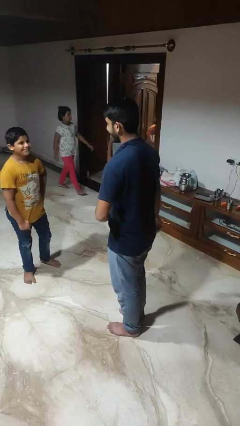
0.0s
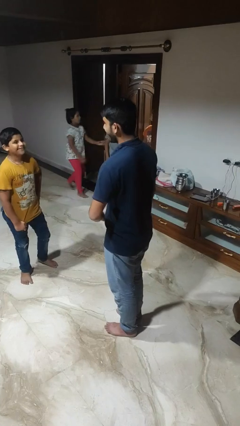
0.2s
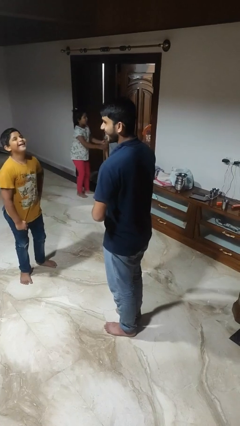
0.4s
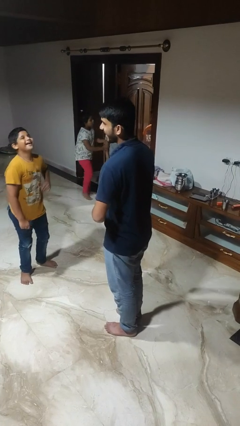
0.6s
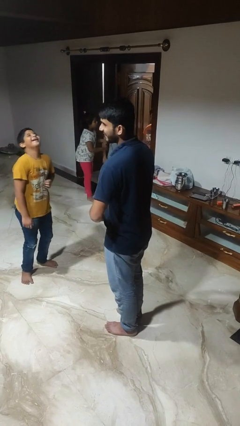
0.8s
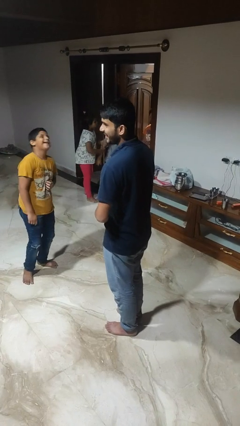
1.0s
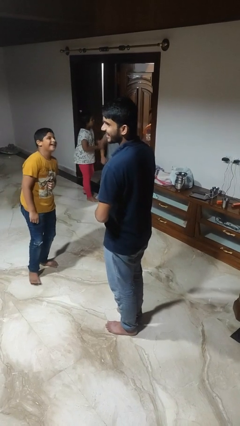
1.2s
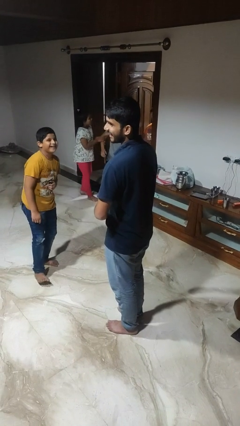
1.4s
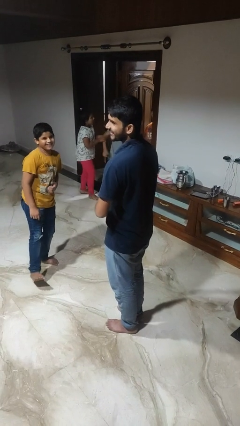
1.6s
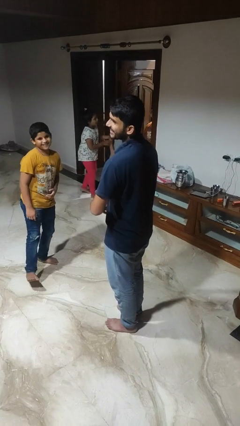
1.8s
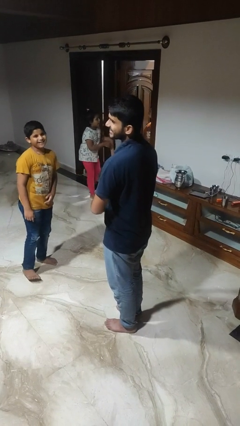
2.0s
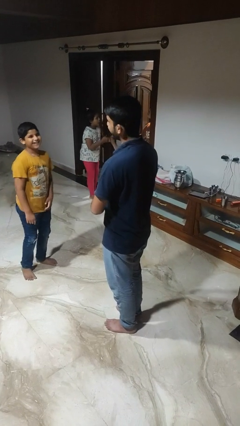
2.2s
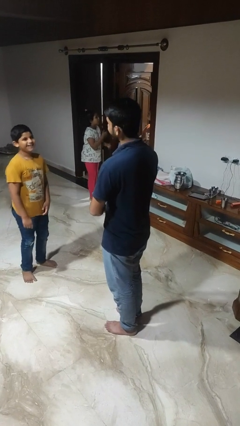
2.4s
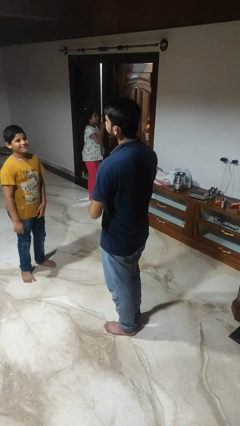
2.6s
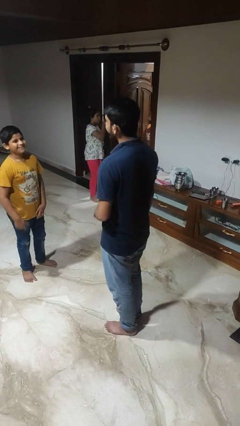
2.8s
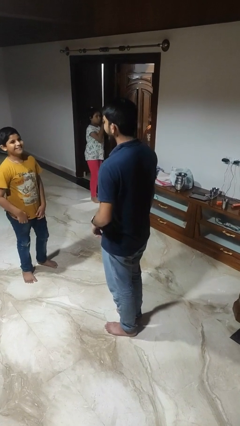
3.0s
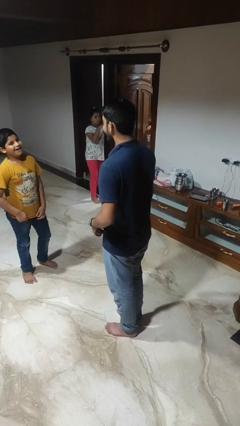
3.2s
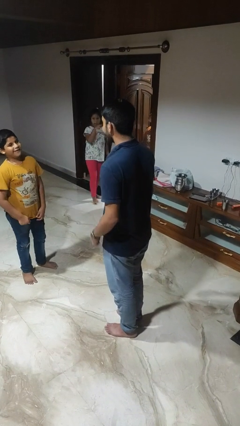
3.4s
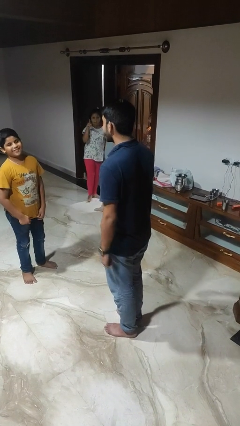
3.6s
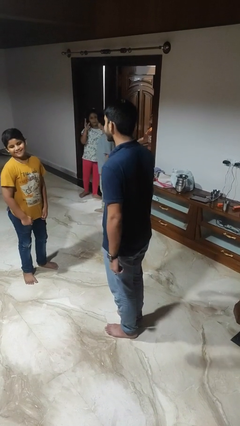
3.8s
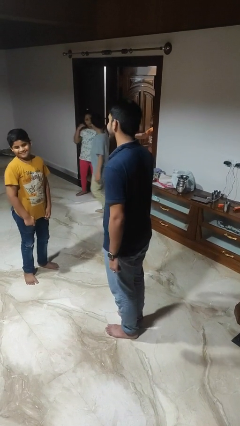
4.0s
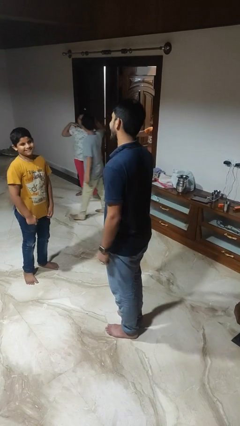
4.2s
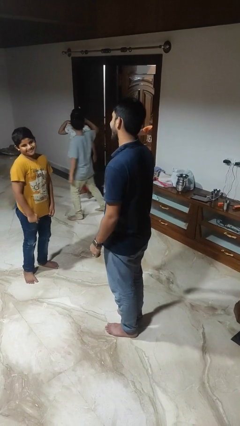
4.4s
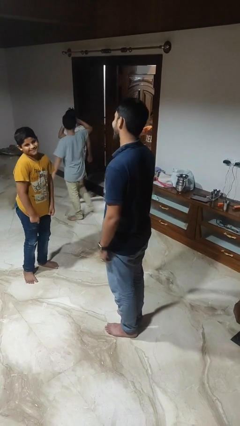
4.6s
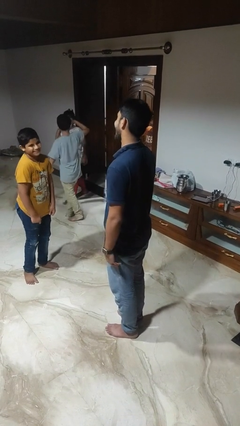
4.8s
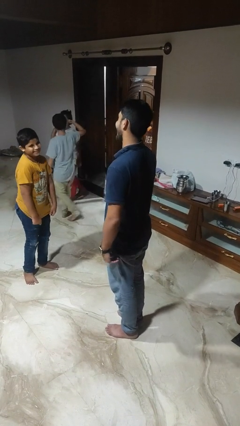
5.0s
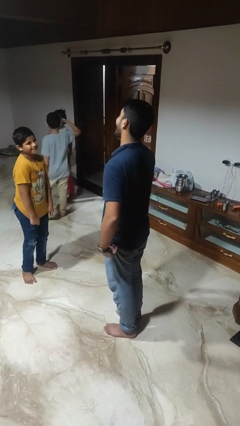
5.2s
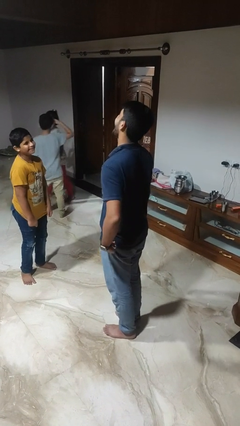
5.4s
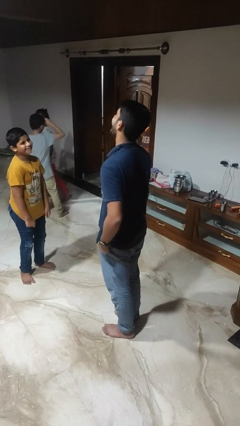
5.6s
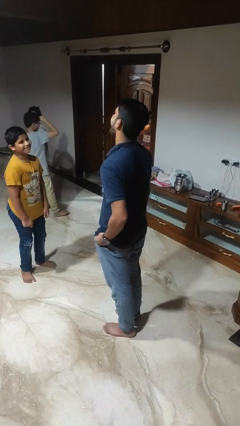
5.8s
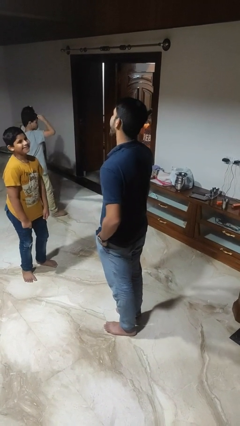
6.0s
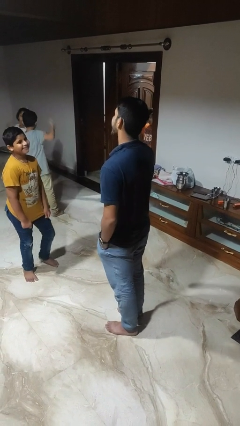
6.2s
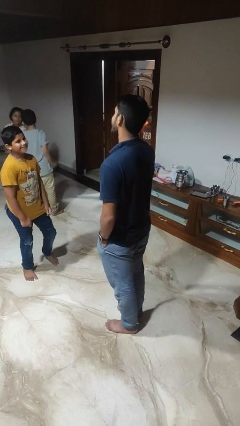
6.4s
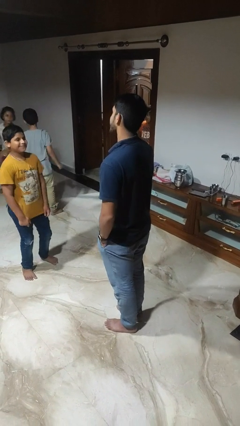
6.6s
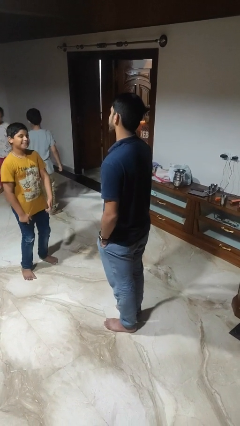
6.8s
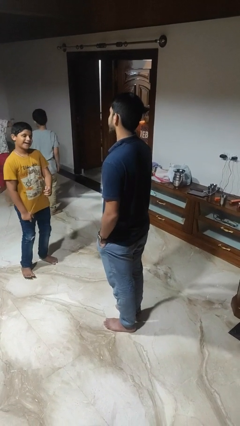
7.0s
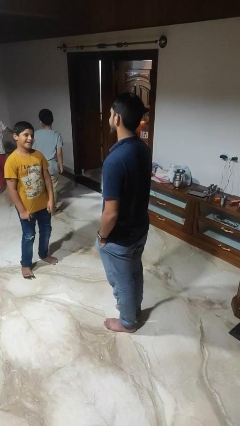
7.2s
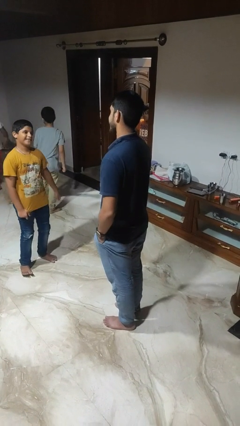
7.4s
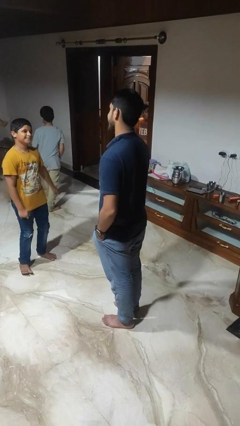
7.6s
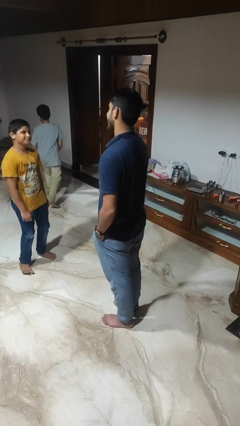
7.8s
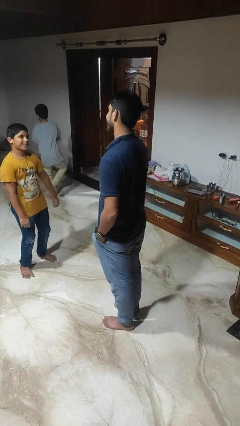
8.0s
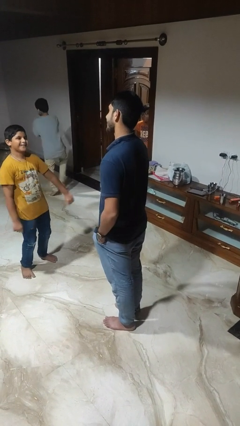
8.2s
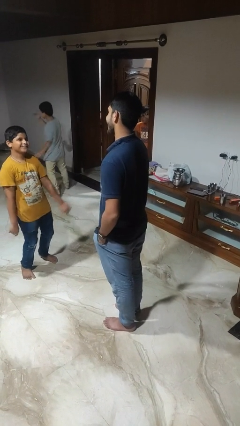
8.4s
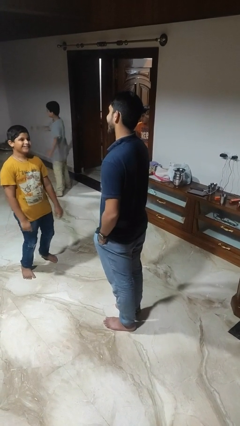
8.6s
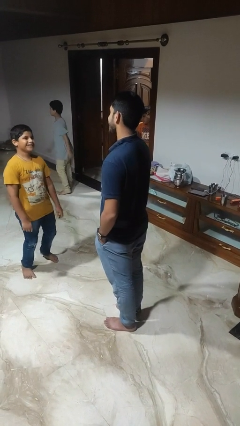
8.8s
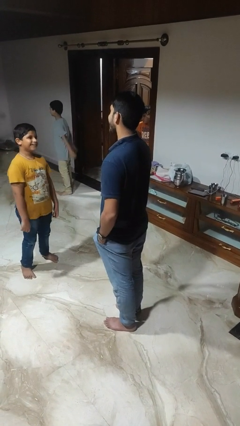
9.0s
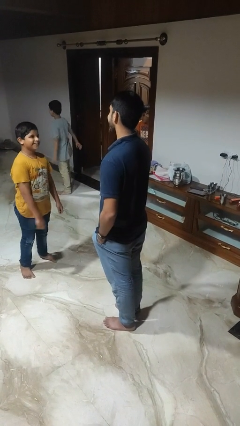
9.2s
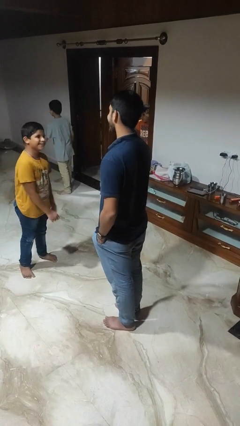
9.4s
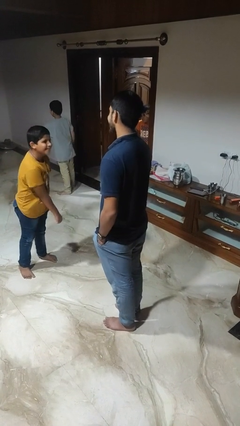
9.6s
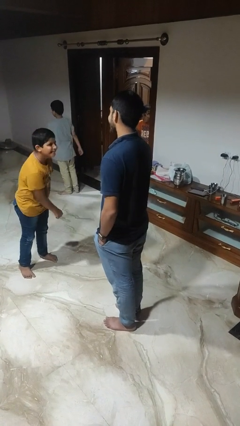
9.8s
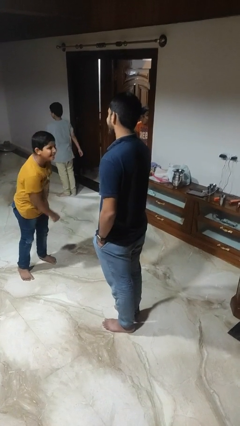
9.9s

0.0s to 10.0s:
person talks to person

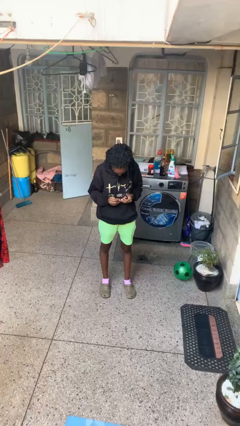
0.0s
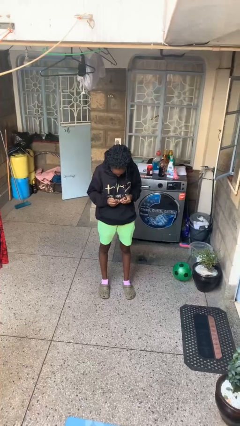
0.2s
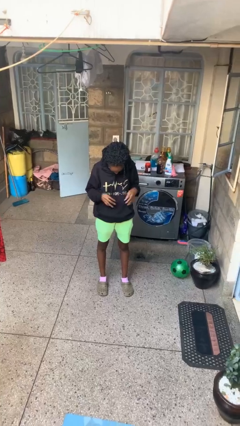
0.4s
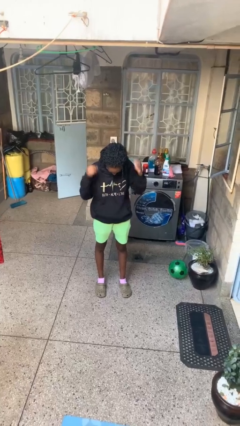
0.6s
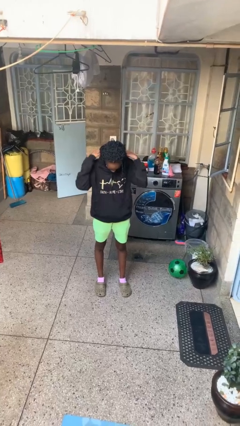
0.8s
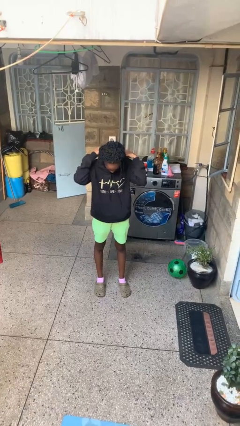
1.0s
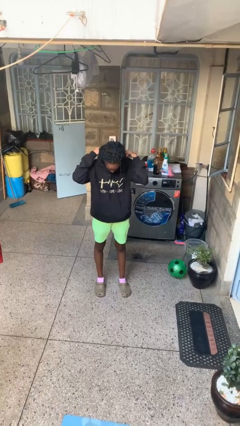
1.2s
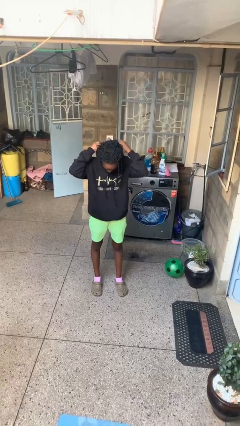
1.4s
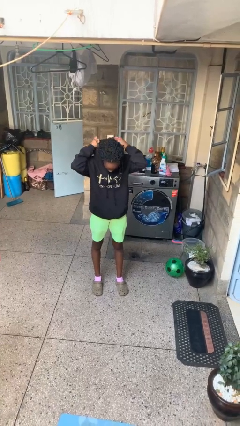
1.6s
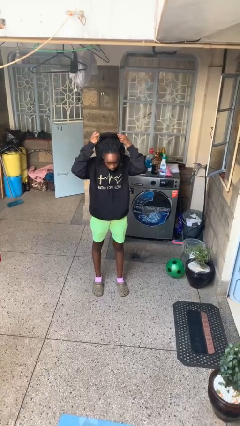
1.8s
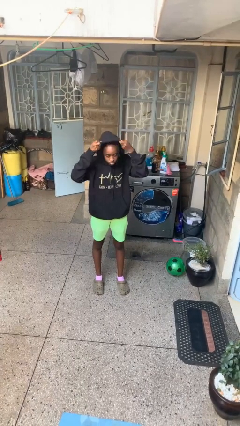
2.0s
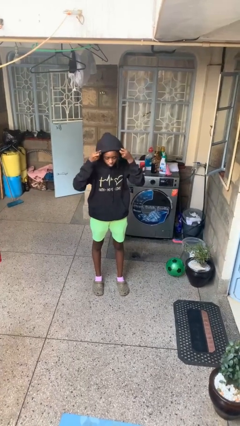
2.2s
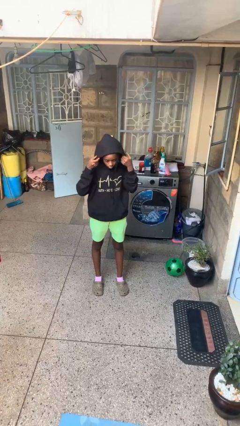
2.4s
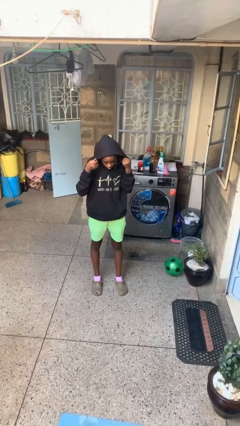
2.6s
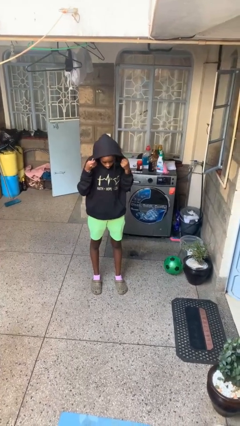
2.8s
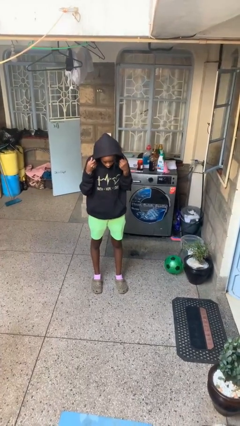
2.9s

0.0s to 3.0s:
person puts on hoodie

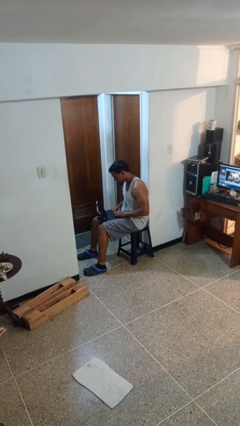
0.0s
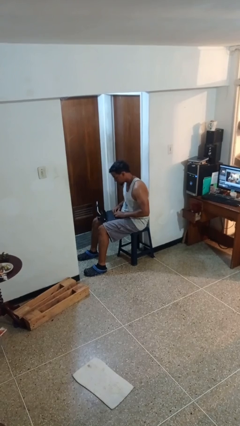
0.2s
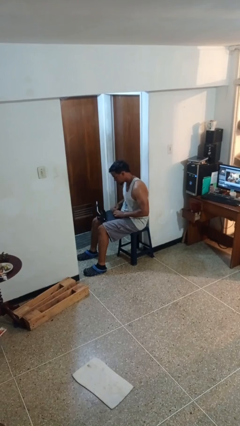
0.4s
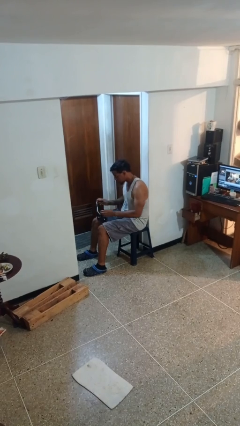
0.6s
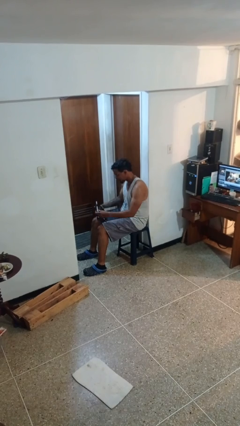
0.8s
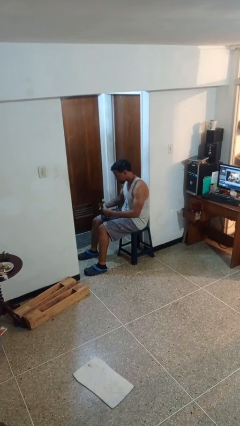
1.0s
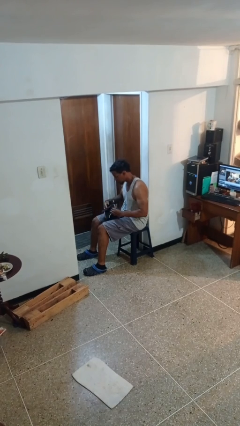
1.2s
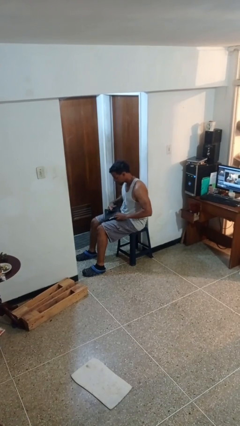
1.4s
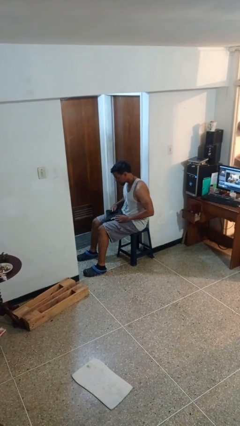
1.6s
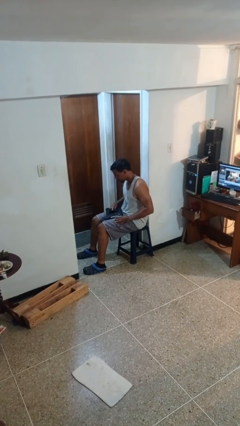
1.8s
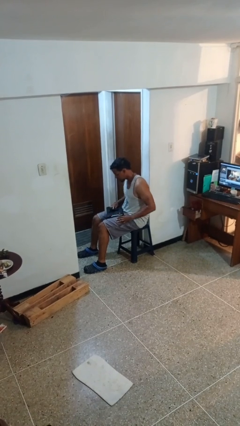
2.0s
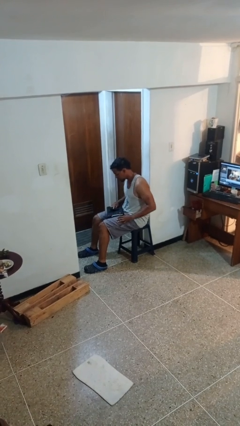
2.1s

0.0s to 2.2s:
person closes laptop

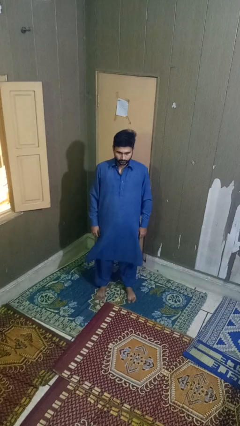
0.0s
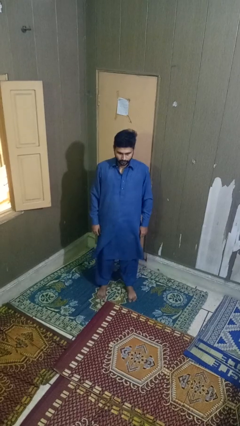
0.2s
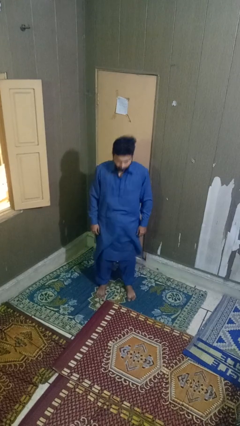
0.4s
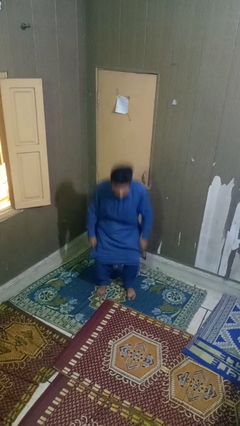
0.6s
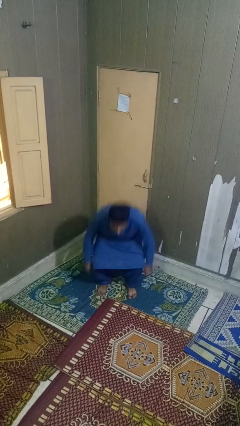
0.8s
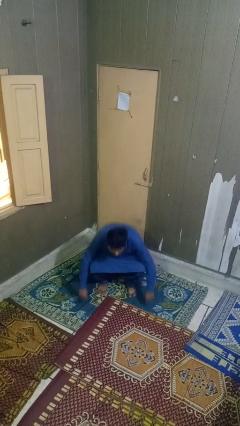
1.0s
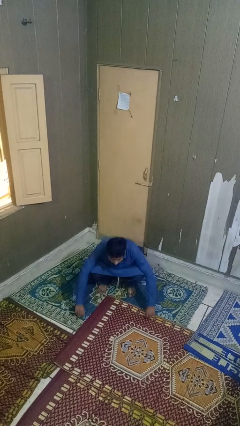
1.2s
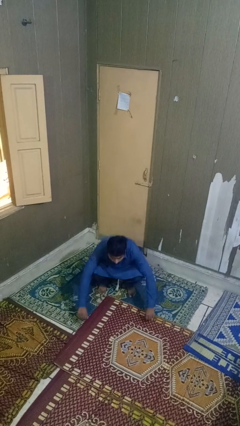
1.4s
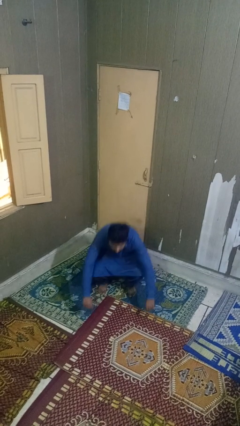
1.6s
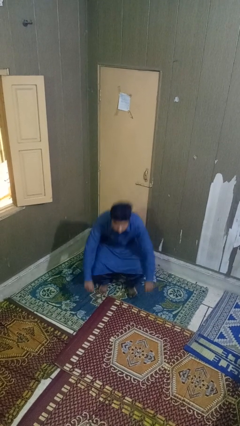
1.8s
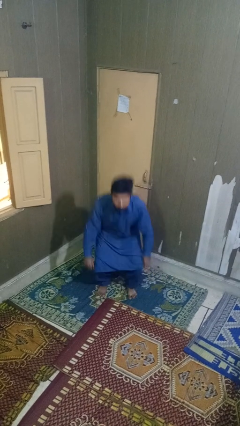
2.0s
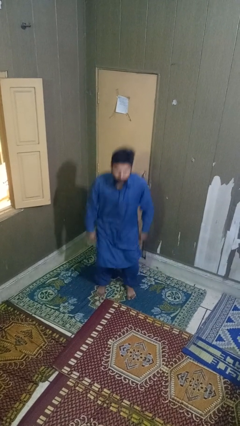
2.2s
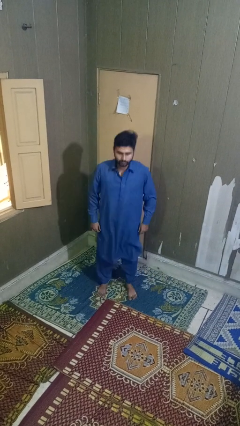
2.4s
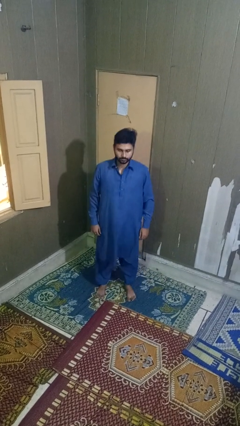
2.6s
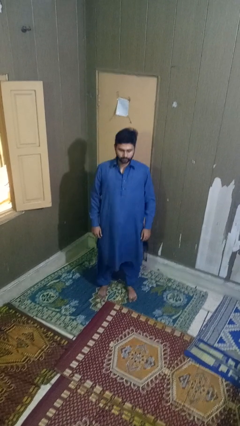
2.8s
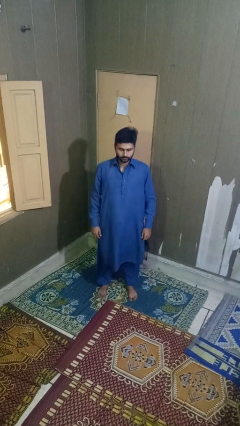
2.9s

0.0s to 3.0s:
person exercises with situp
